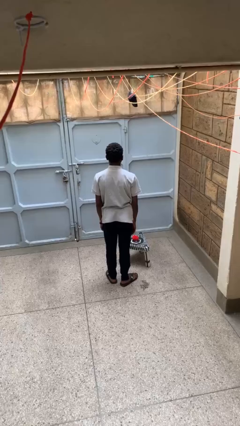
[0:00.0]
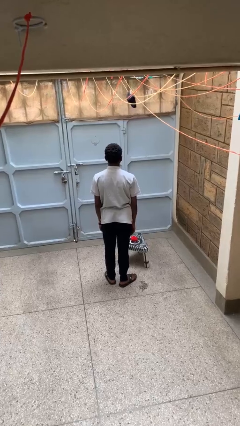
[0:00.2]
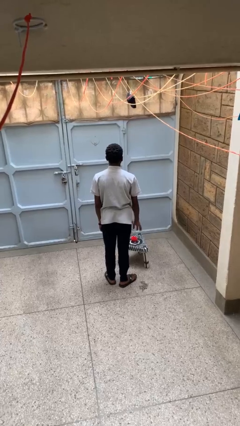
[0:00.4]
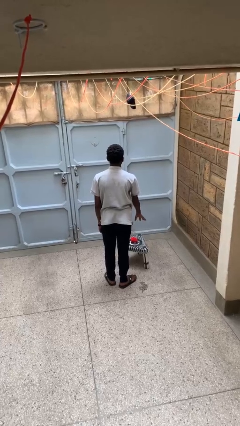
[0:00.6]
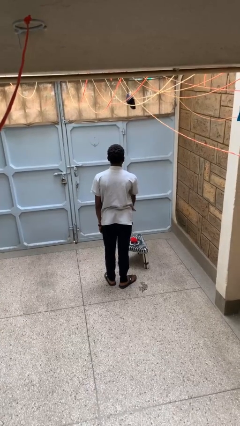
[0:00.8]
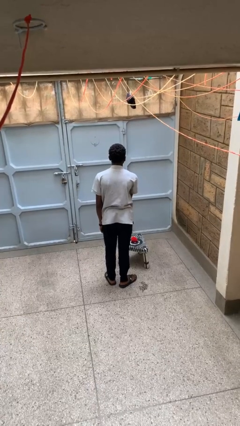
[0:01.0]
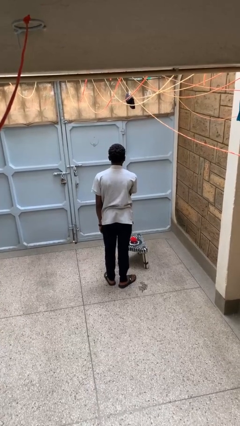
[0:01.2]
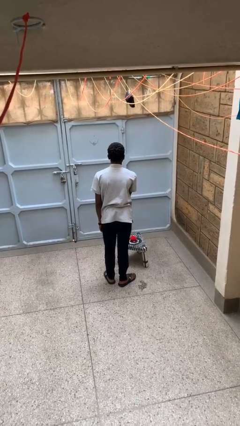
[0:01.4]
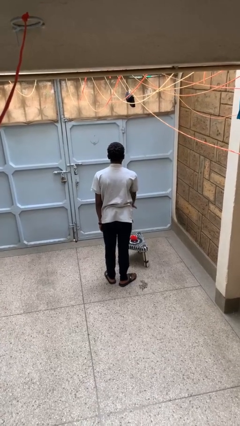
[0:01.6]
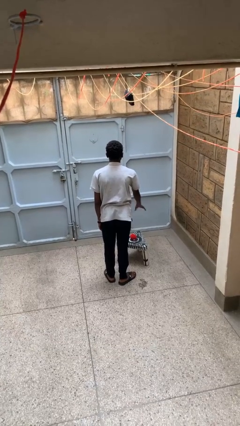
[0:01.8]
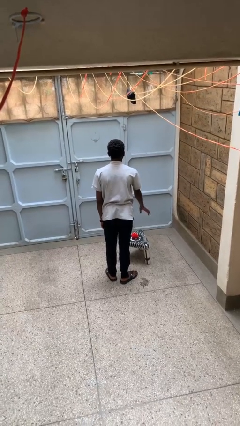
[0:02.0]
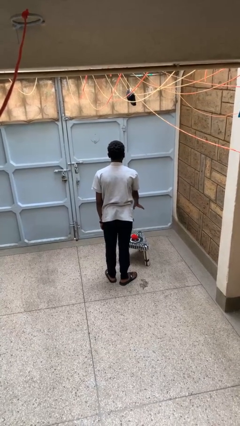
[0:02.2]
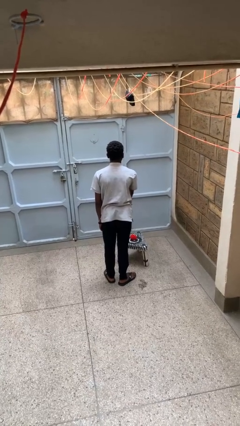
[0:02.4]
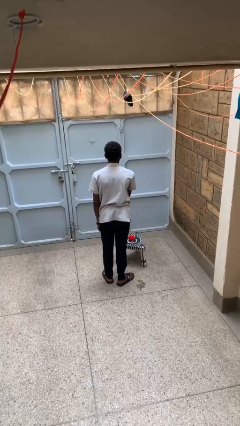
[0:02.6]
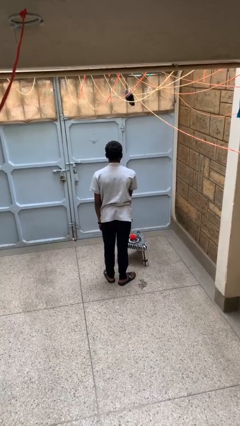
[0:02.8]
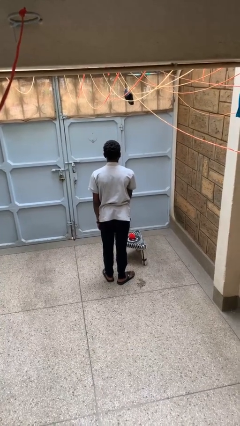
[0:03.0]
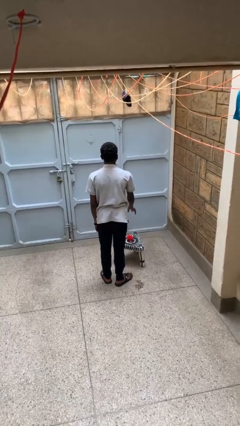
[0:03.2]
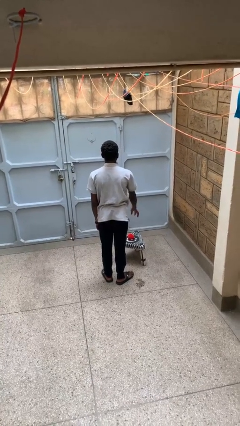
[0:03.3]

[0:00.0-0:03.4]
person waves hand over object

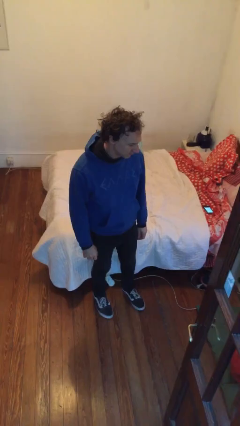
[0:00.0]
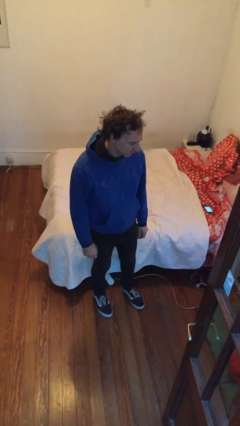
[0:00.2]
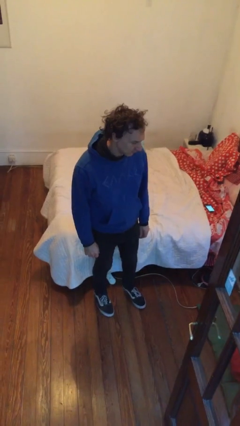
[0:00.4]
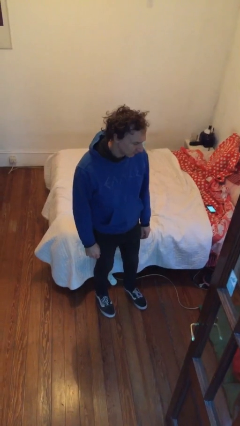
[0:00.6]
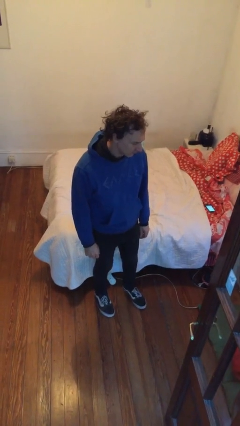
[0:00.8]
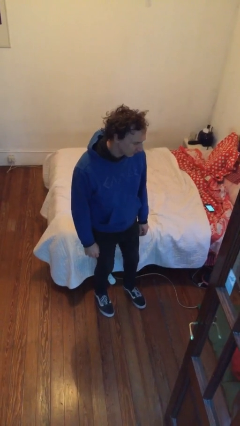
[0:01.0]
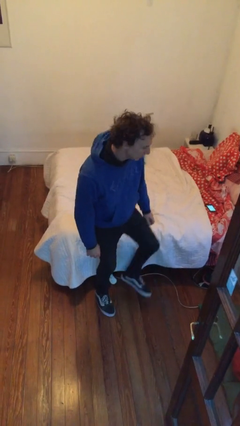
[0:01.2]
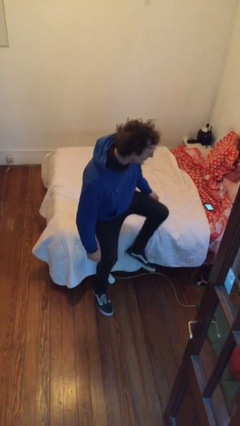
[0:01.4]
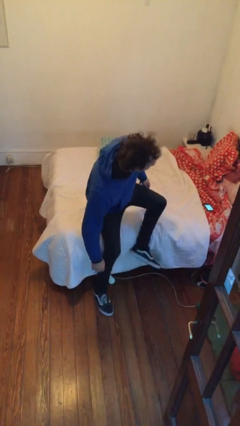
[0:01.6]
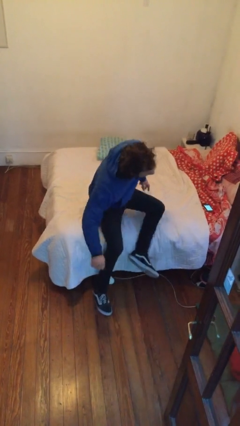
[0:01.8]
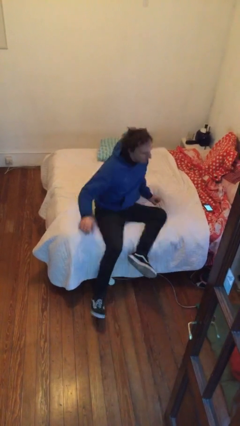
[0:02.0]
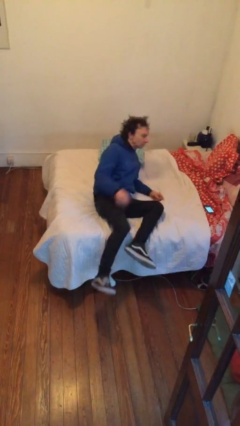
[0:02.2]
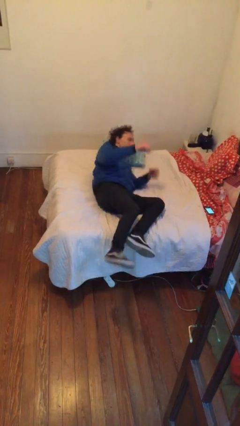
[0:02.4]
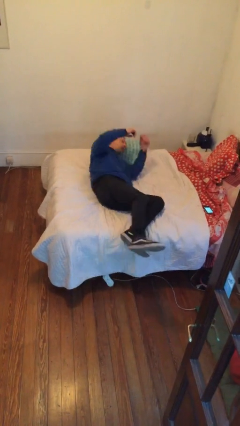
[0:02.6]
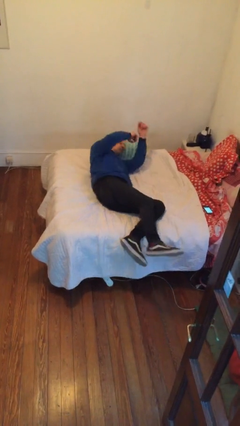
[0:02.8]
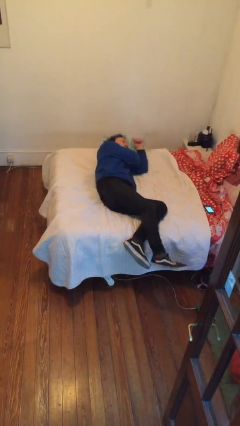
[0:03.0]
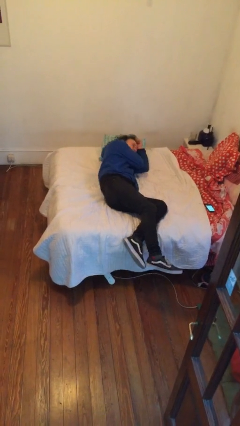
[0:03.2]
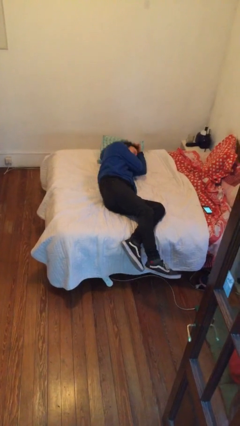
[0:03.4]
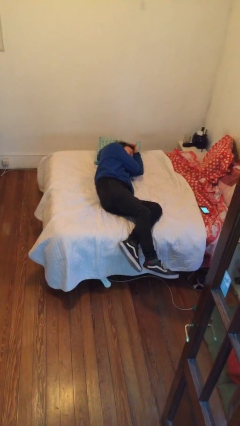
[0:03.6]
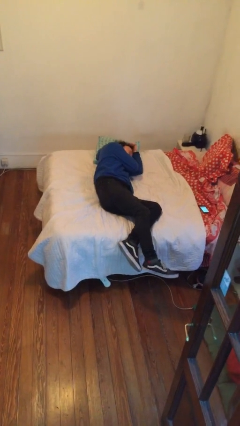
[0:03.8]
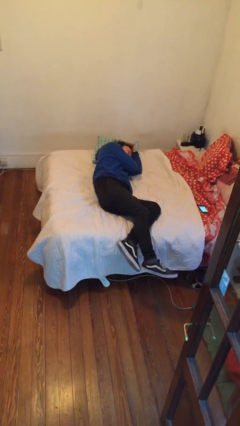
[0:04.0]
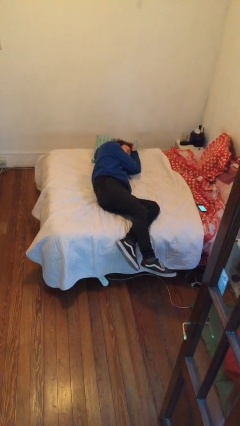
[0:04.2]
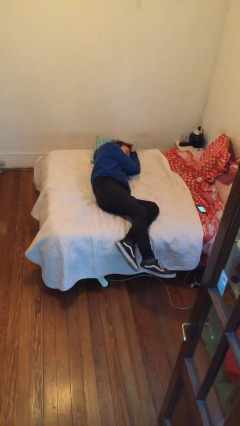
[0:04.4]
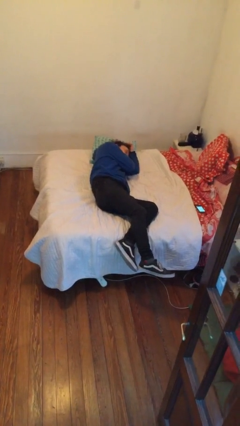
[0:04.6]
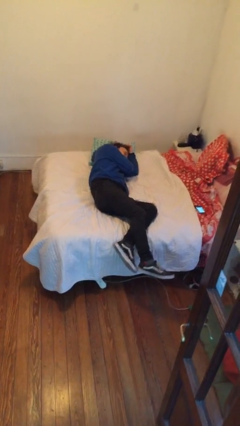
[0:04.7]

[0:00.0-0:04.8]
person lies down on bed

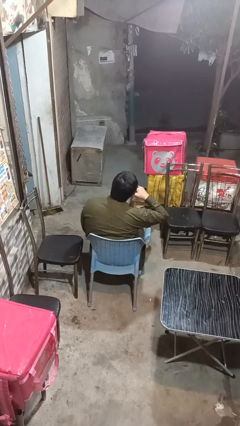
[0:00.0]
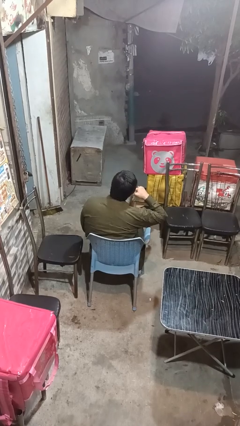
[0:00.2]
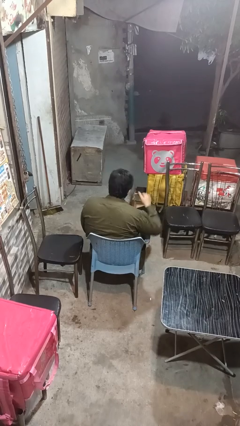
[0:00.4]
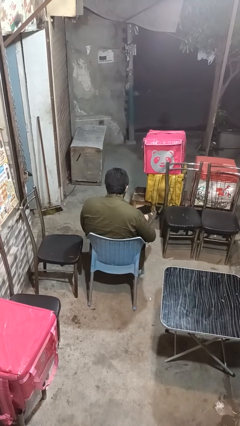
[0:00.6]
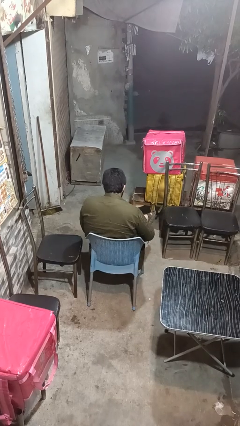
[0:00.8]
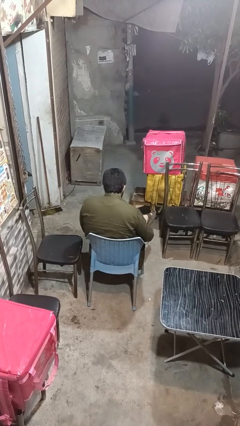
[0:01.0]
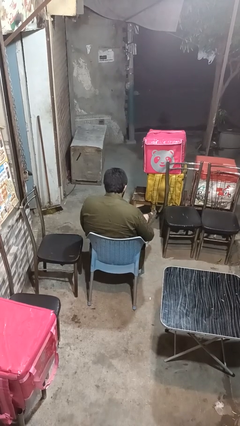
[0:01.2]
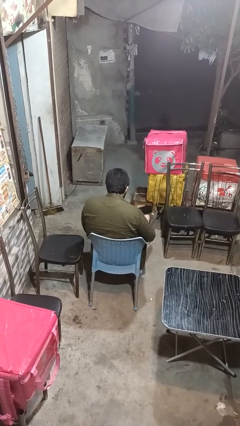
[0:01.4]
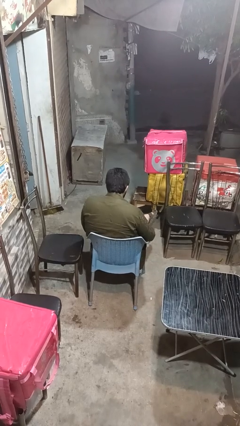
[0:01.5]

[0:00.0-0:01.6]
person gestures call me

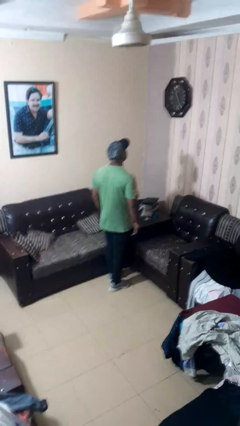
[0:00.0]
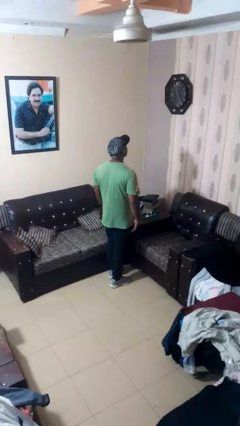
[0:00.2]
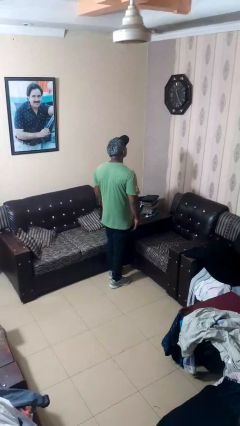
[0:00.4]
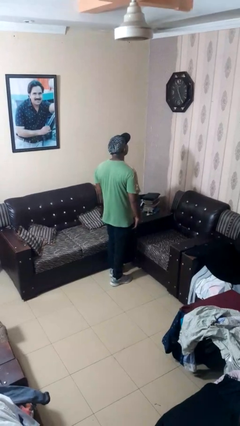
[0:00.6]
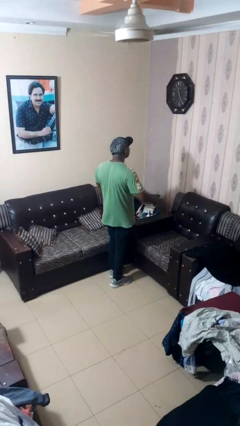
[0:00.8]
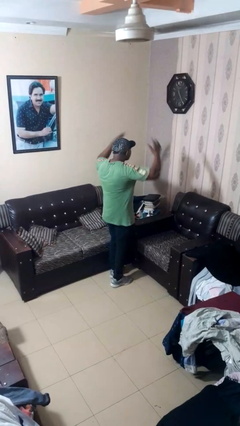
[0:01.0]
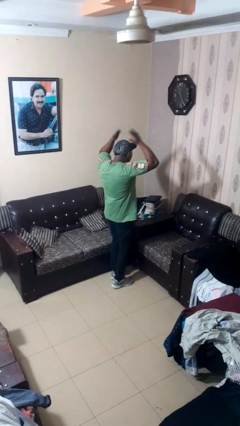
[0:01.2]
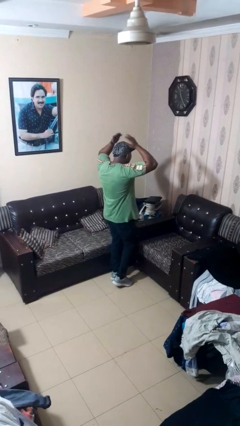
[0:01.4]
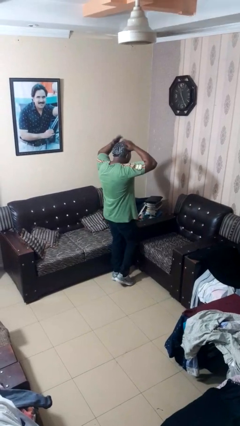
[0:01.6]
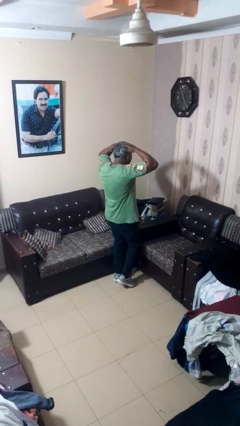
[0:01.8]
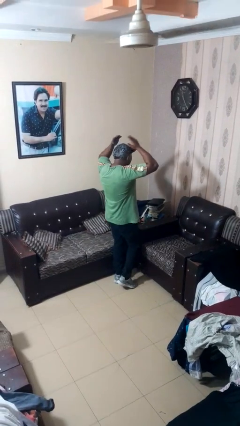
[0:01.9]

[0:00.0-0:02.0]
person pats head

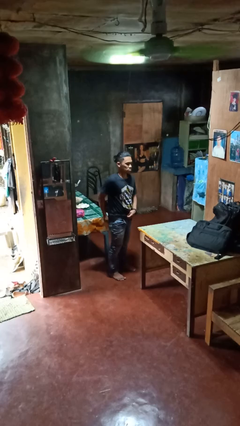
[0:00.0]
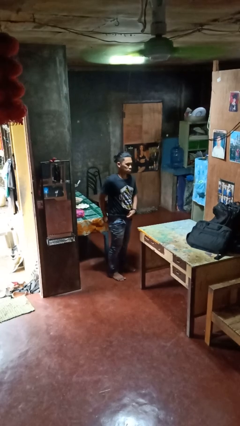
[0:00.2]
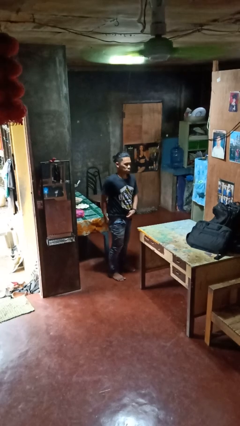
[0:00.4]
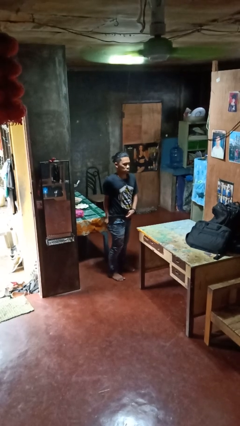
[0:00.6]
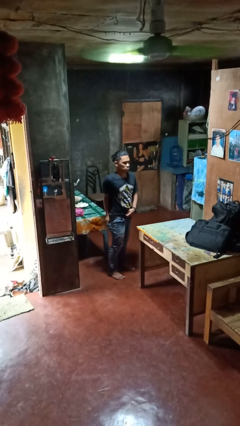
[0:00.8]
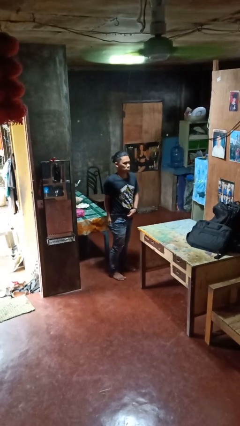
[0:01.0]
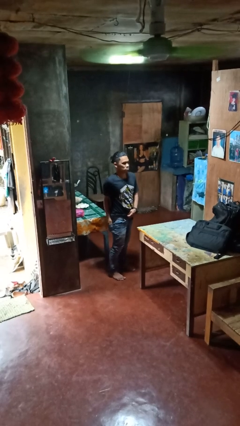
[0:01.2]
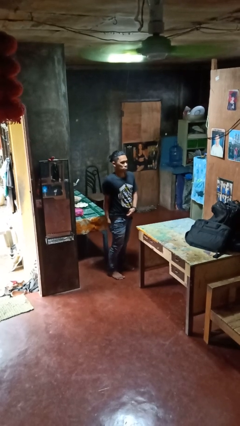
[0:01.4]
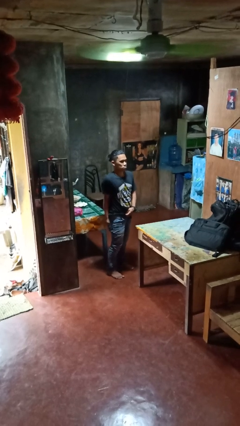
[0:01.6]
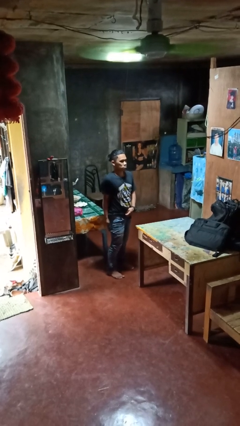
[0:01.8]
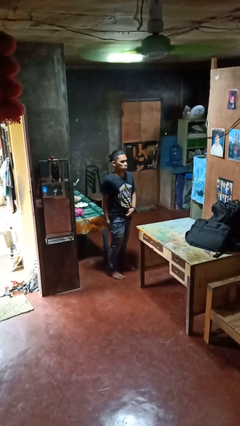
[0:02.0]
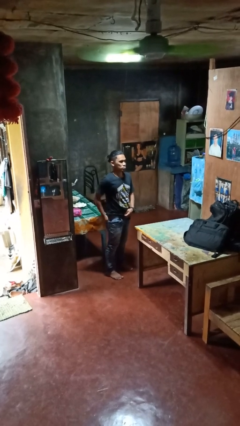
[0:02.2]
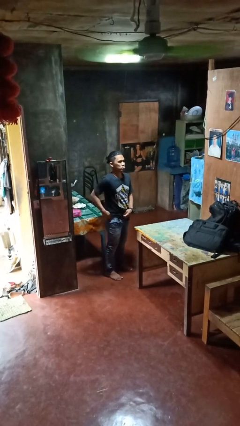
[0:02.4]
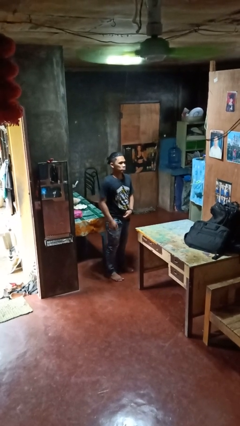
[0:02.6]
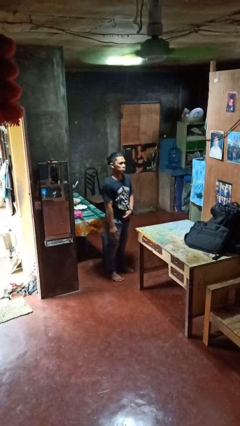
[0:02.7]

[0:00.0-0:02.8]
person puts hands in back pockets

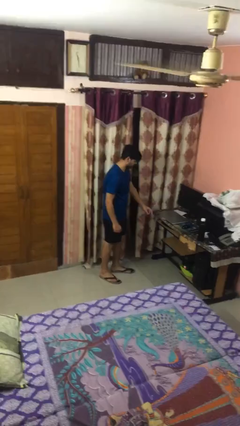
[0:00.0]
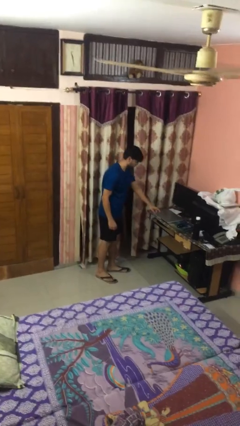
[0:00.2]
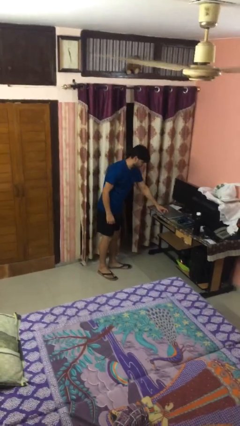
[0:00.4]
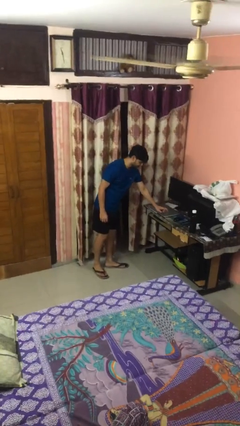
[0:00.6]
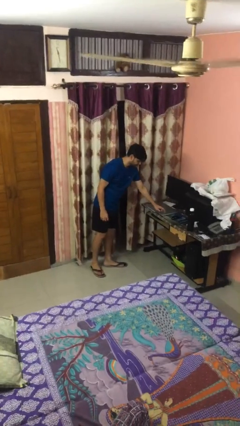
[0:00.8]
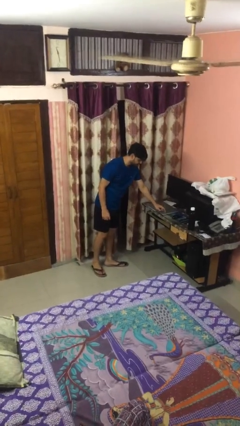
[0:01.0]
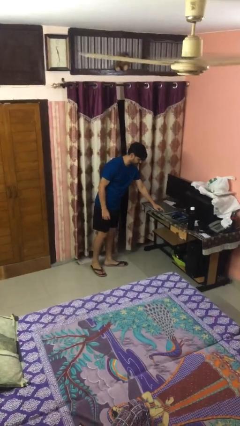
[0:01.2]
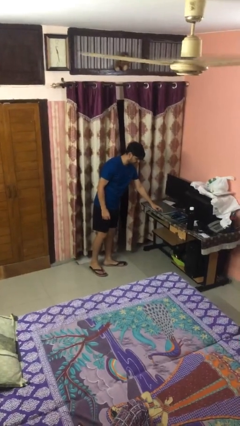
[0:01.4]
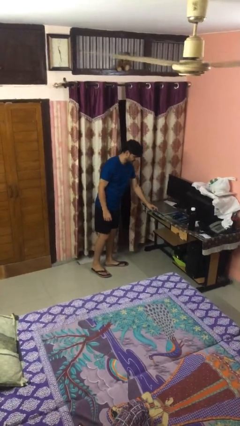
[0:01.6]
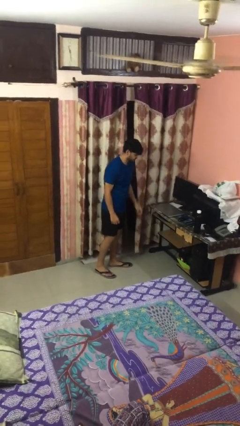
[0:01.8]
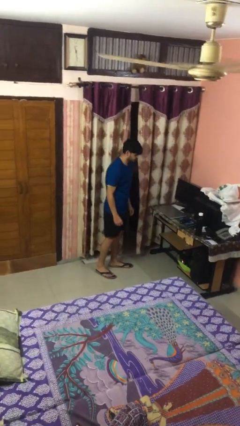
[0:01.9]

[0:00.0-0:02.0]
person taps object with finger

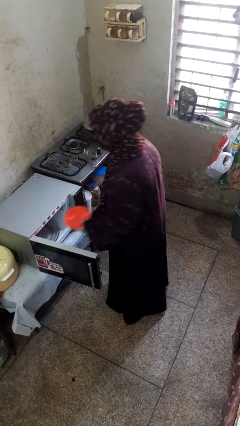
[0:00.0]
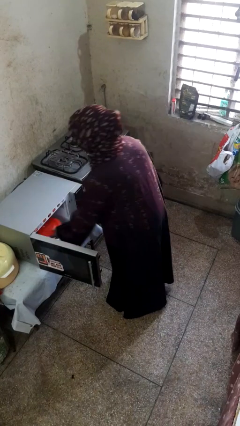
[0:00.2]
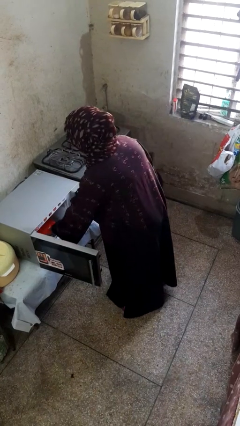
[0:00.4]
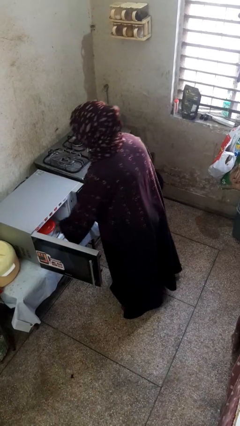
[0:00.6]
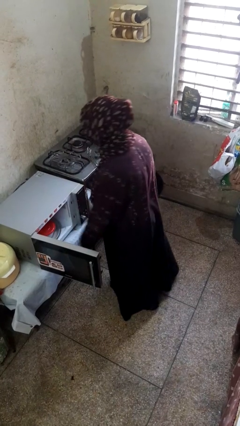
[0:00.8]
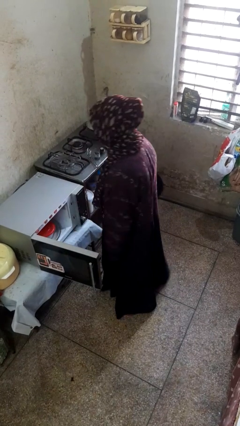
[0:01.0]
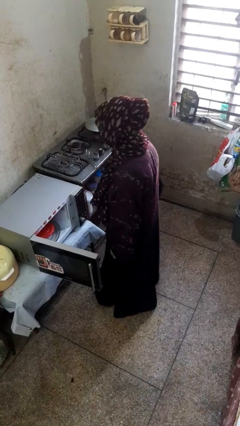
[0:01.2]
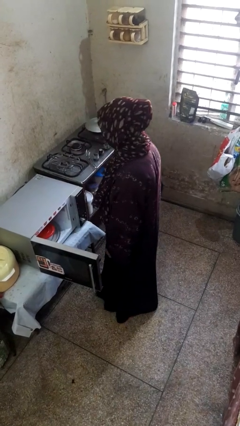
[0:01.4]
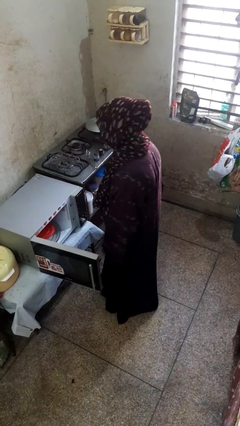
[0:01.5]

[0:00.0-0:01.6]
person puts object into microwave
